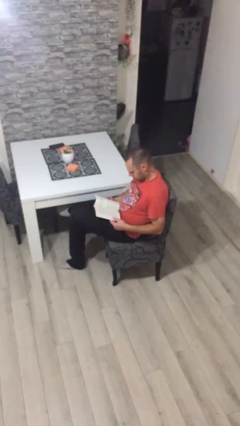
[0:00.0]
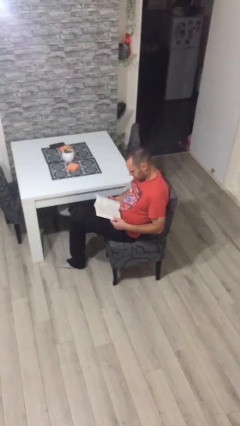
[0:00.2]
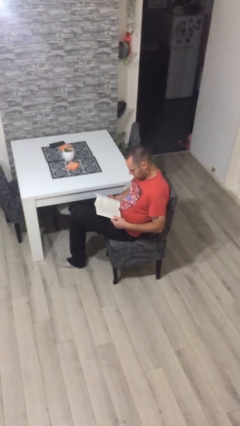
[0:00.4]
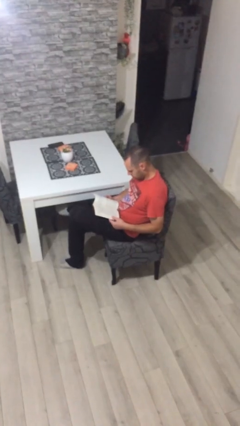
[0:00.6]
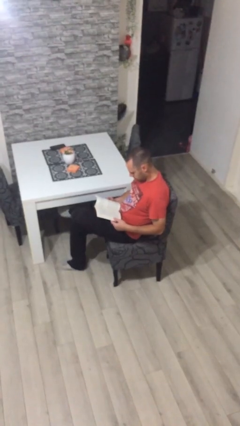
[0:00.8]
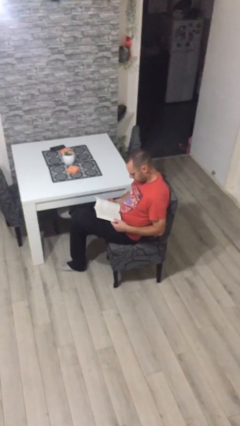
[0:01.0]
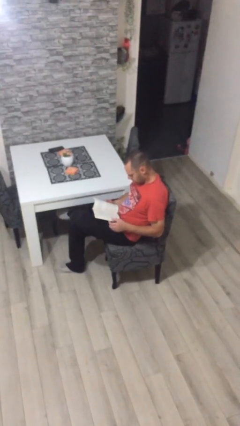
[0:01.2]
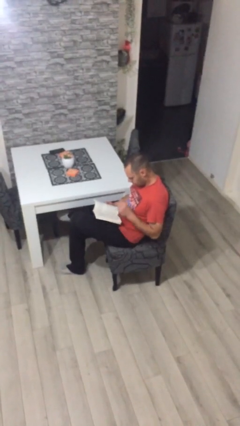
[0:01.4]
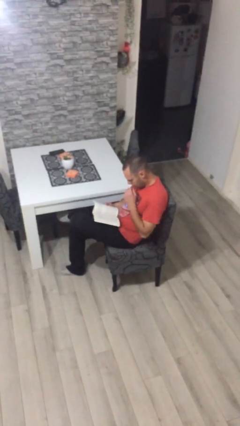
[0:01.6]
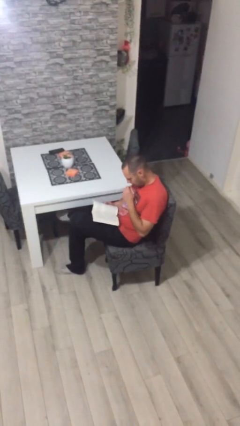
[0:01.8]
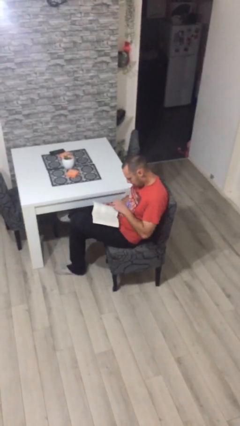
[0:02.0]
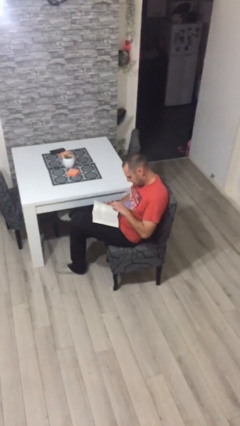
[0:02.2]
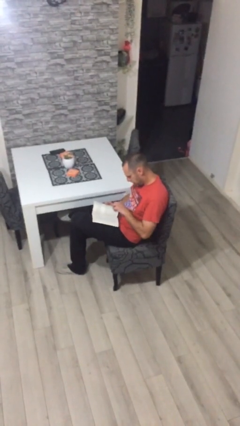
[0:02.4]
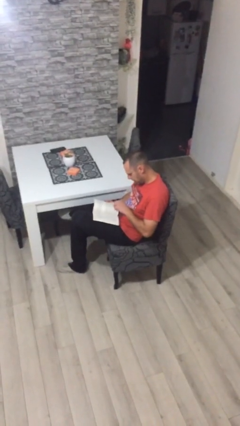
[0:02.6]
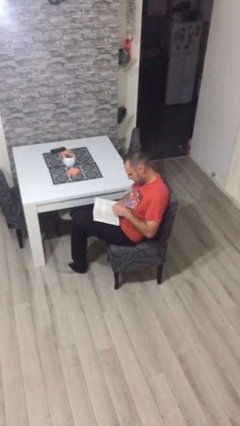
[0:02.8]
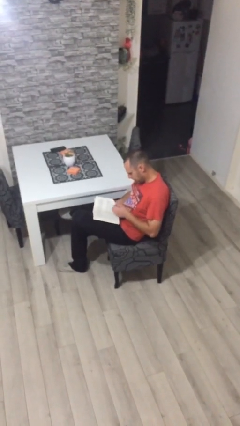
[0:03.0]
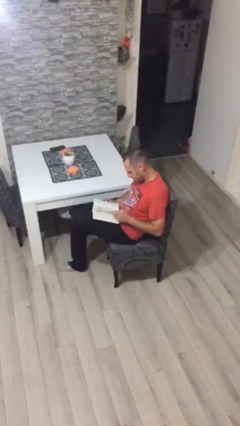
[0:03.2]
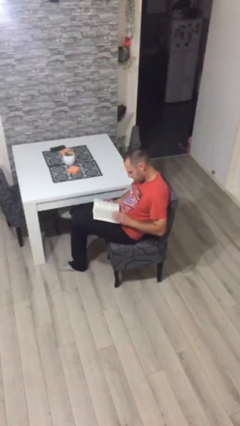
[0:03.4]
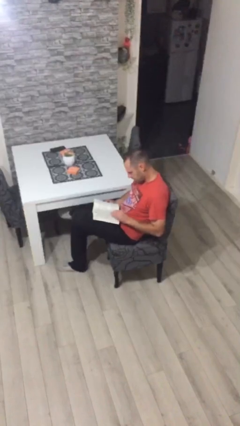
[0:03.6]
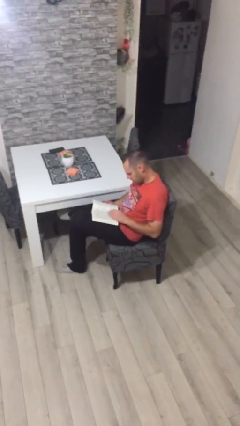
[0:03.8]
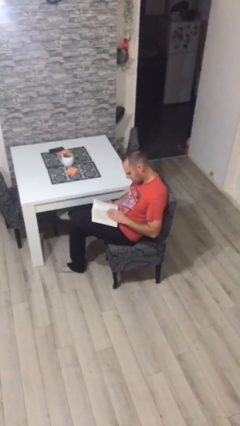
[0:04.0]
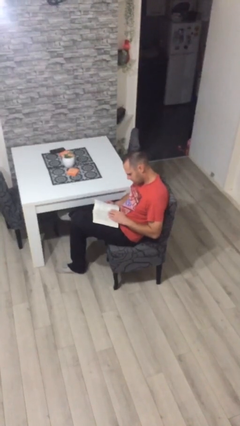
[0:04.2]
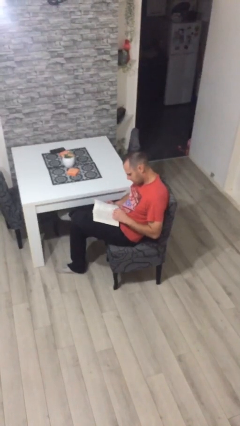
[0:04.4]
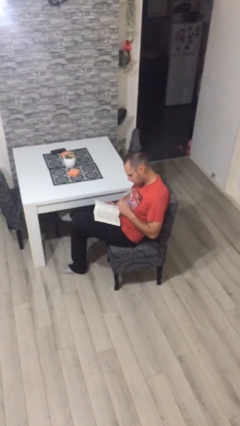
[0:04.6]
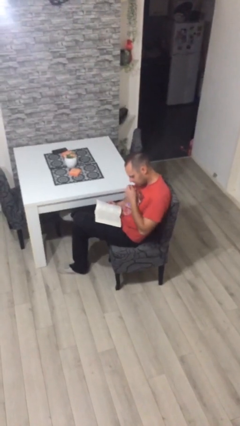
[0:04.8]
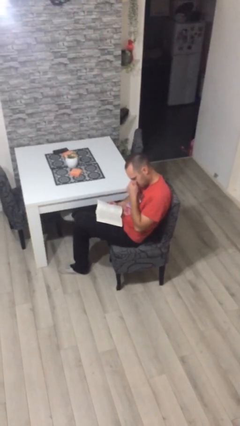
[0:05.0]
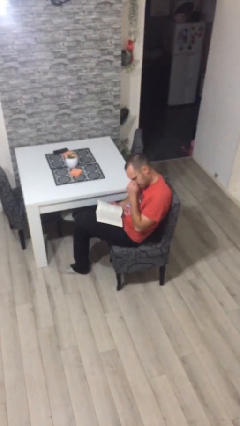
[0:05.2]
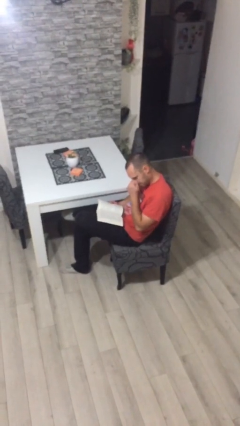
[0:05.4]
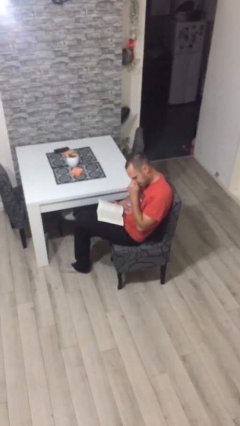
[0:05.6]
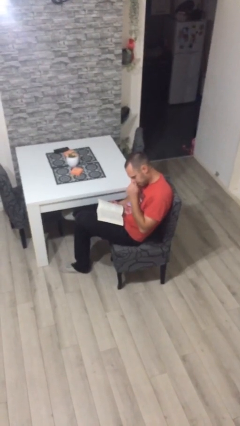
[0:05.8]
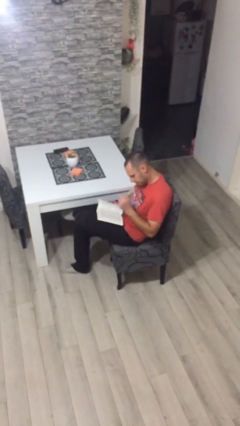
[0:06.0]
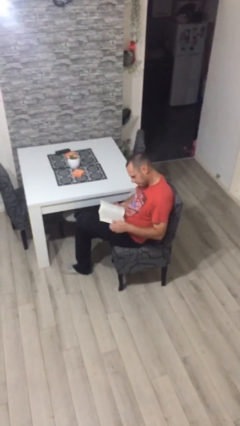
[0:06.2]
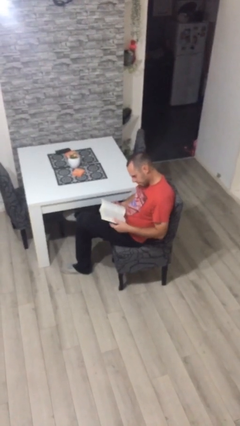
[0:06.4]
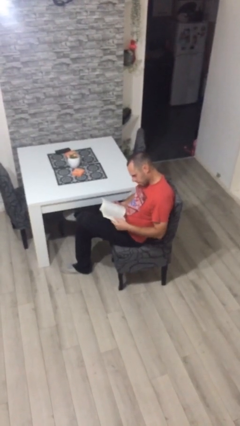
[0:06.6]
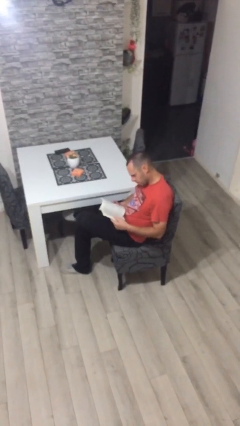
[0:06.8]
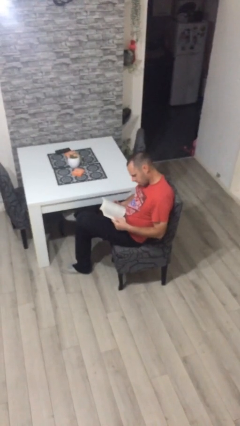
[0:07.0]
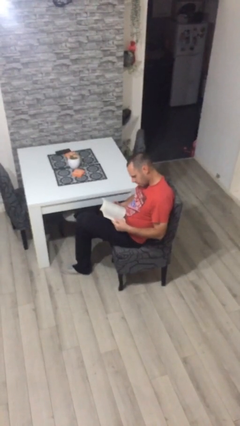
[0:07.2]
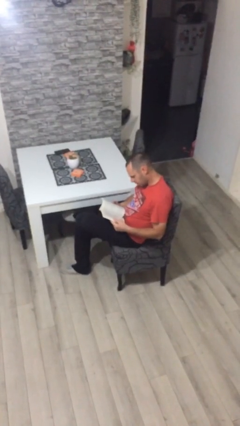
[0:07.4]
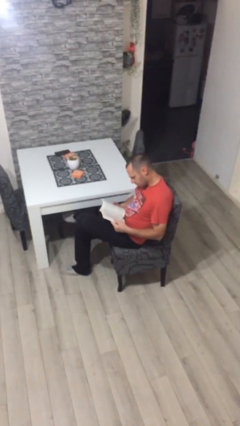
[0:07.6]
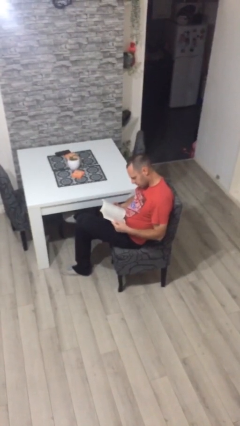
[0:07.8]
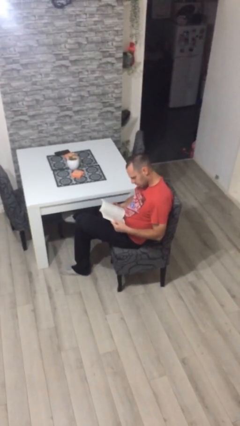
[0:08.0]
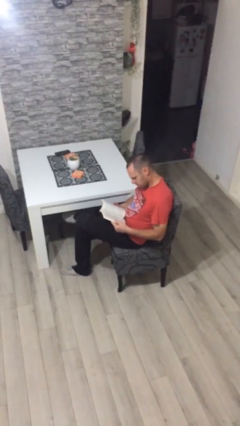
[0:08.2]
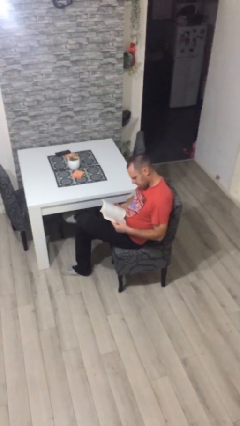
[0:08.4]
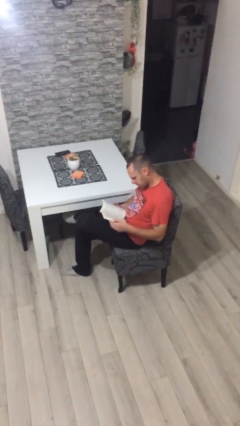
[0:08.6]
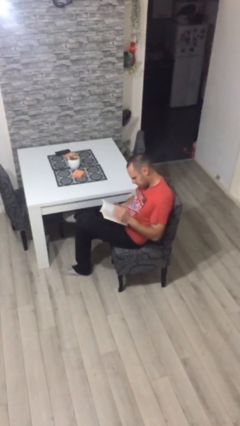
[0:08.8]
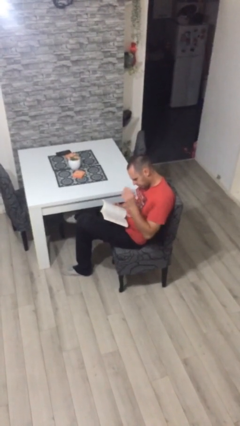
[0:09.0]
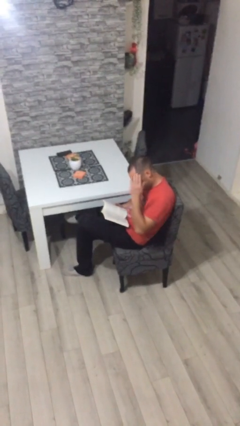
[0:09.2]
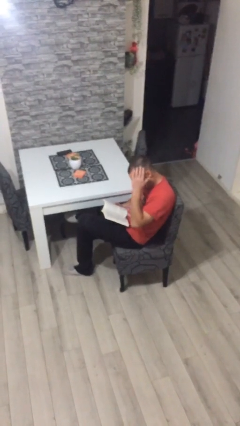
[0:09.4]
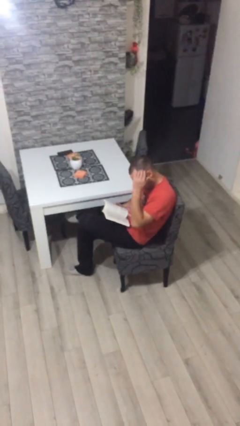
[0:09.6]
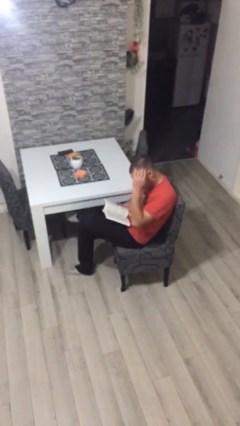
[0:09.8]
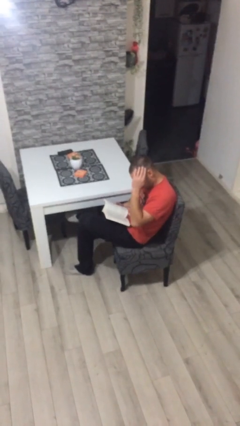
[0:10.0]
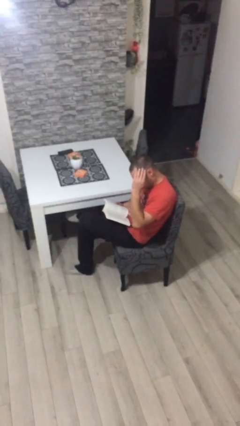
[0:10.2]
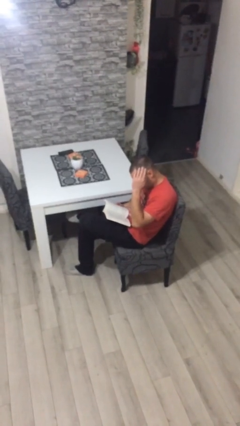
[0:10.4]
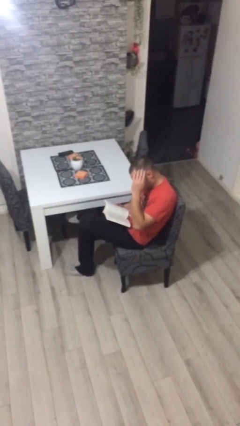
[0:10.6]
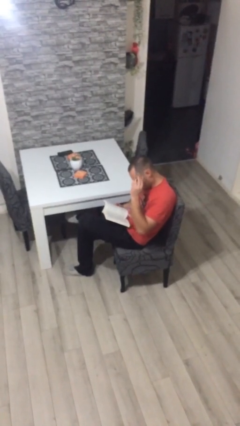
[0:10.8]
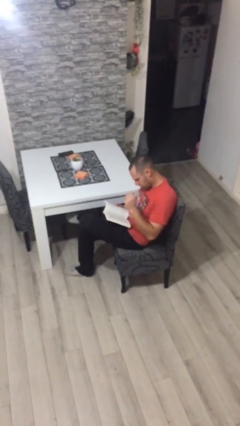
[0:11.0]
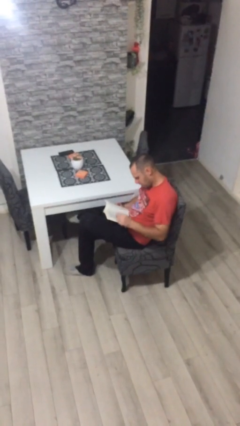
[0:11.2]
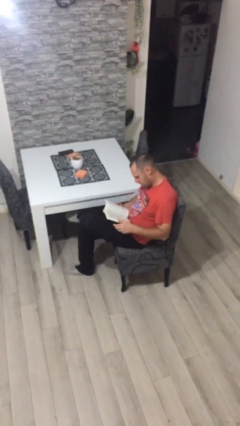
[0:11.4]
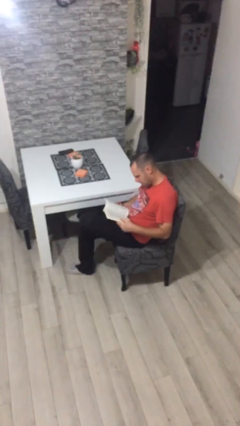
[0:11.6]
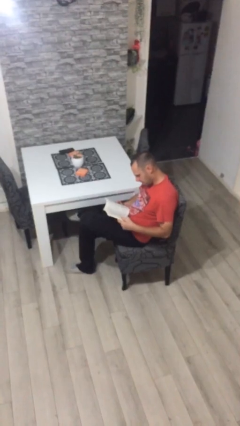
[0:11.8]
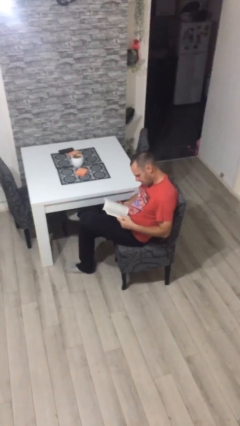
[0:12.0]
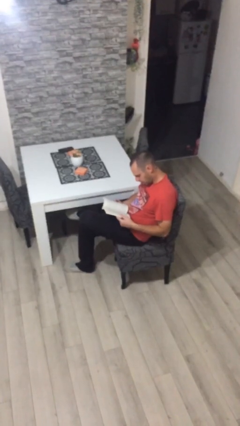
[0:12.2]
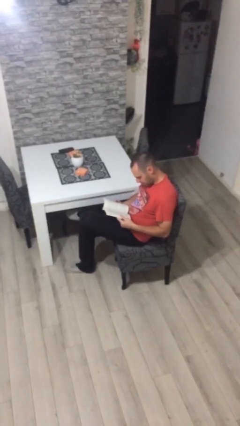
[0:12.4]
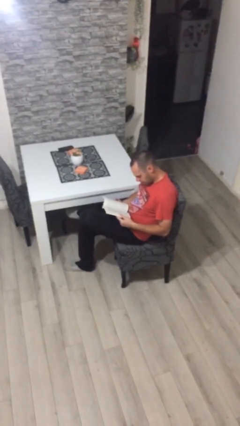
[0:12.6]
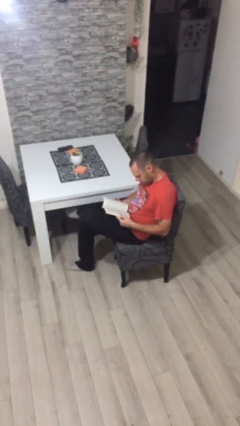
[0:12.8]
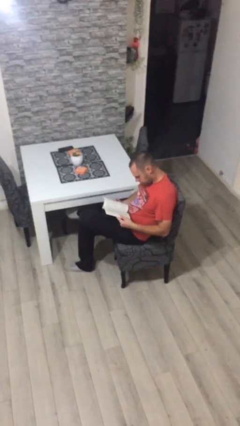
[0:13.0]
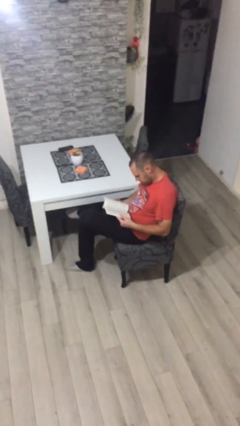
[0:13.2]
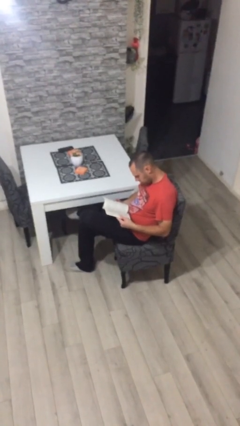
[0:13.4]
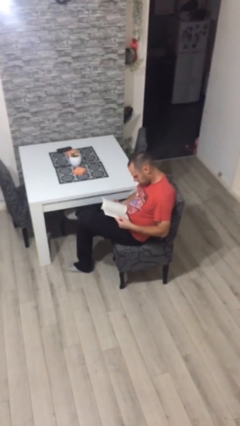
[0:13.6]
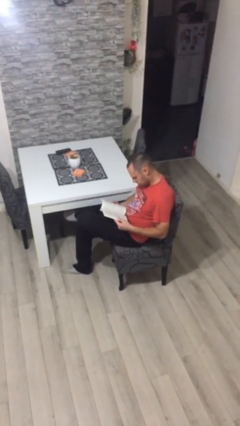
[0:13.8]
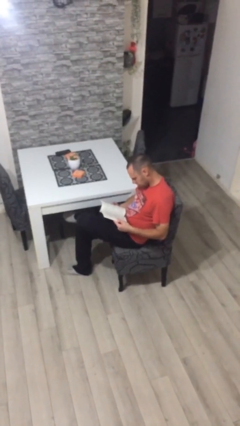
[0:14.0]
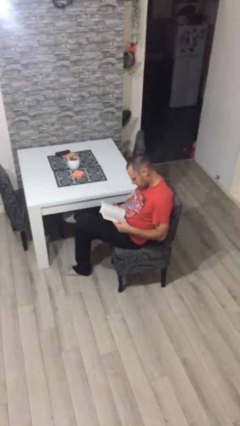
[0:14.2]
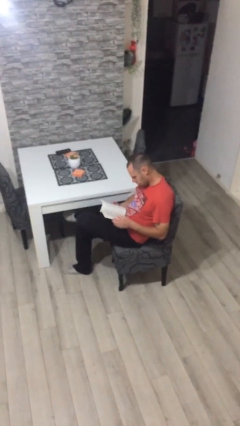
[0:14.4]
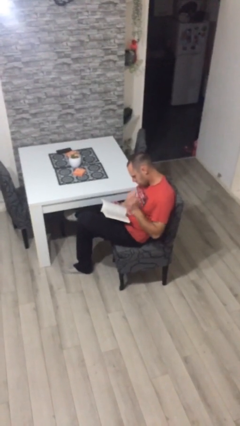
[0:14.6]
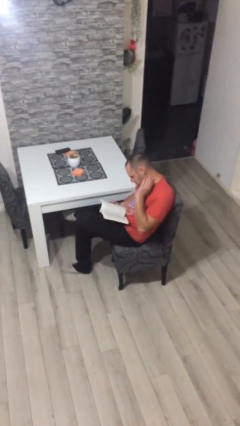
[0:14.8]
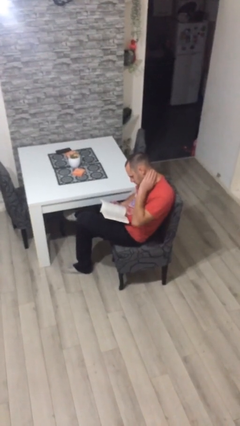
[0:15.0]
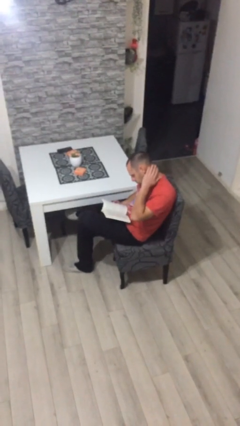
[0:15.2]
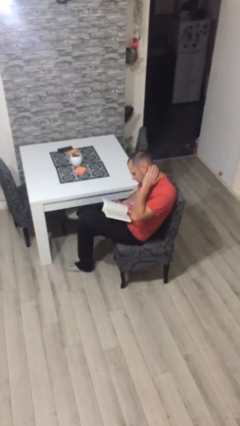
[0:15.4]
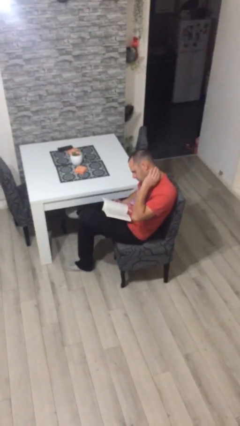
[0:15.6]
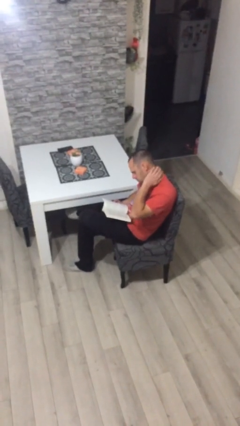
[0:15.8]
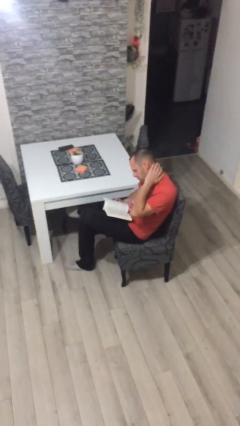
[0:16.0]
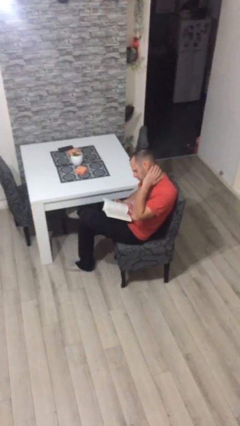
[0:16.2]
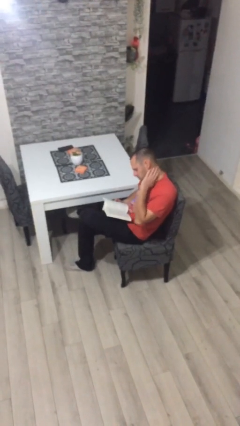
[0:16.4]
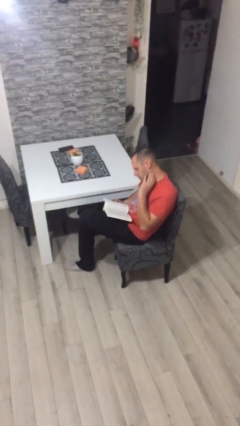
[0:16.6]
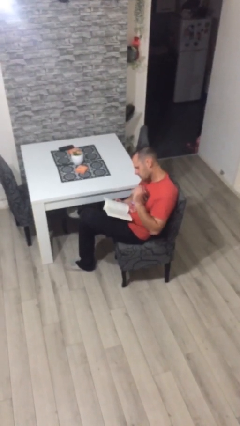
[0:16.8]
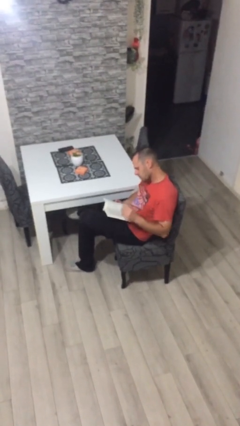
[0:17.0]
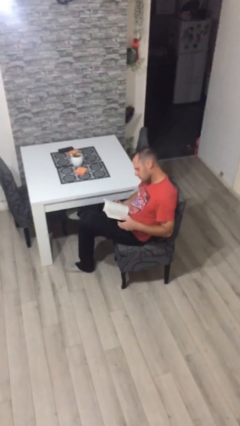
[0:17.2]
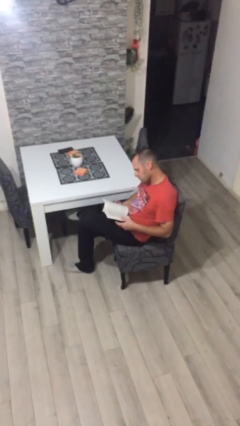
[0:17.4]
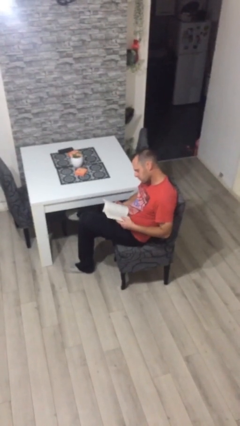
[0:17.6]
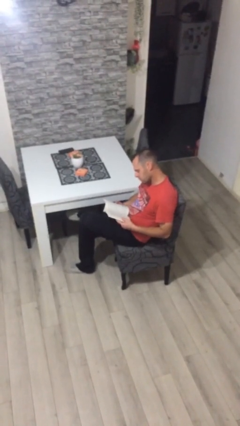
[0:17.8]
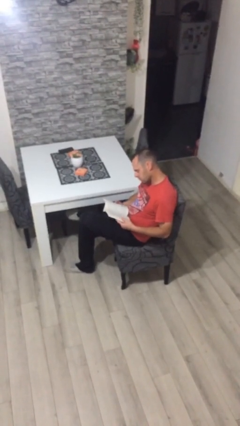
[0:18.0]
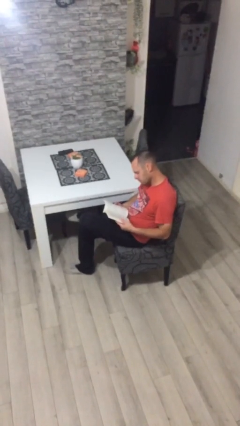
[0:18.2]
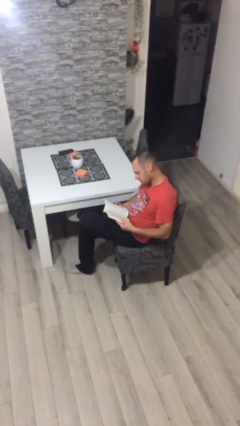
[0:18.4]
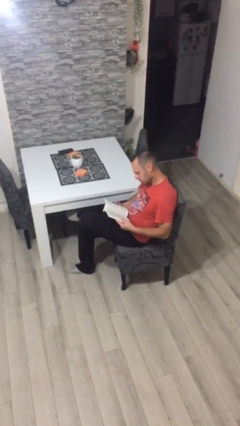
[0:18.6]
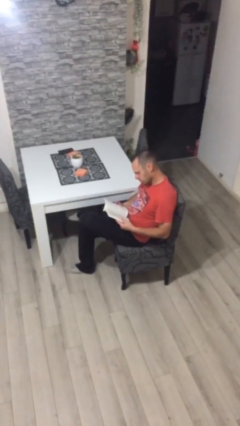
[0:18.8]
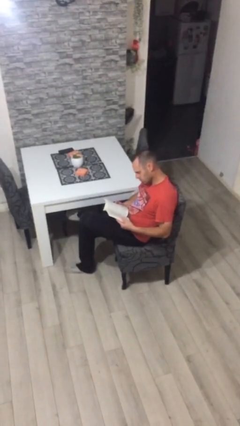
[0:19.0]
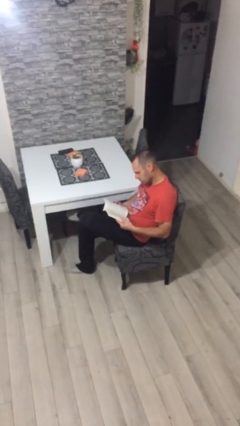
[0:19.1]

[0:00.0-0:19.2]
person reads document
